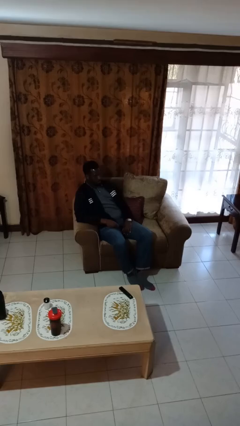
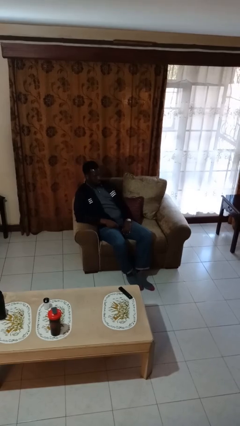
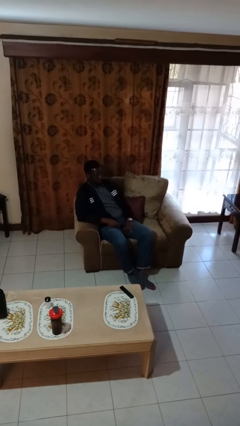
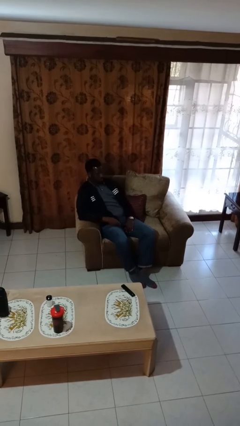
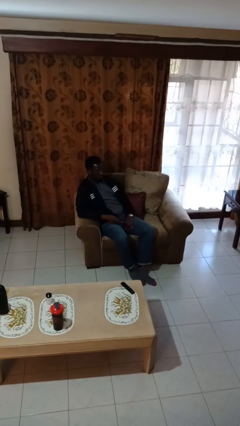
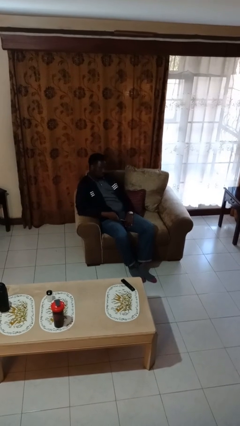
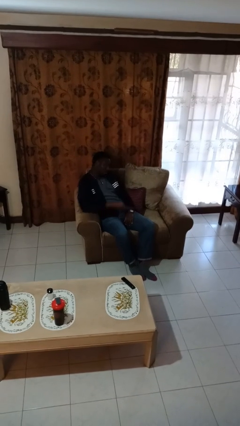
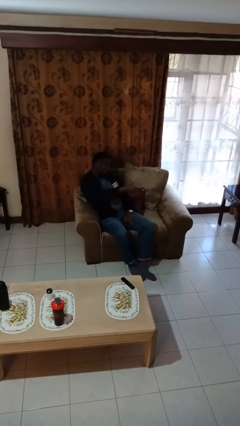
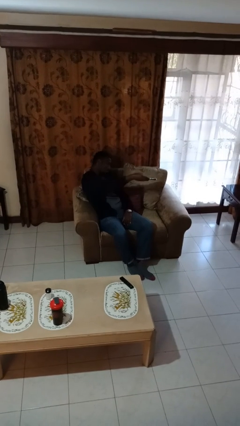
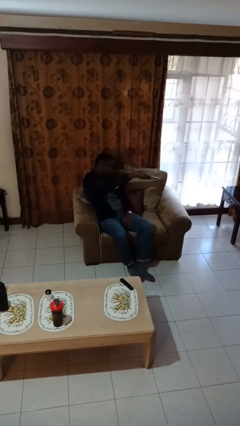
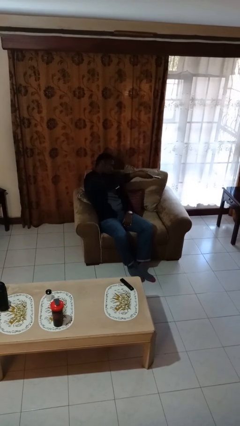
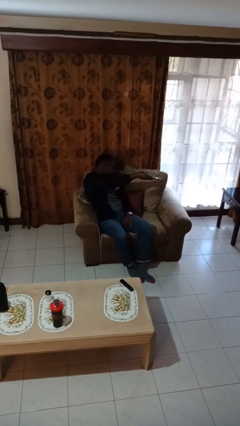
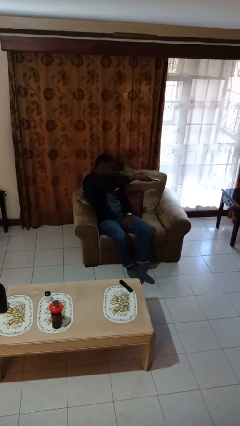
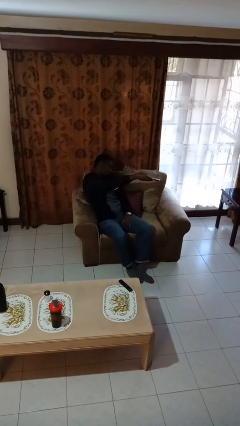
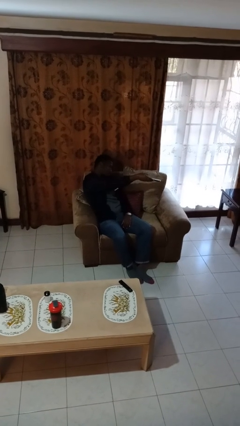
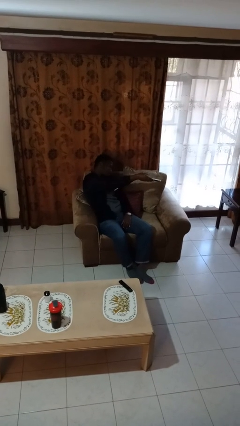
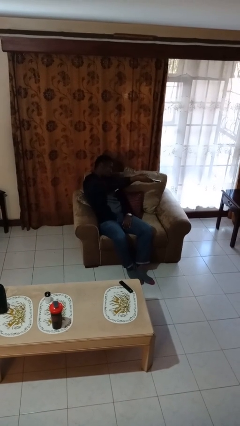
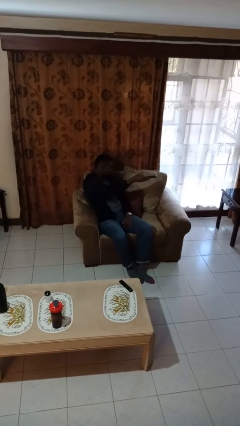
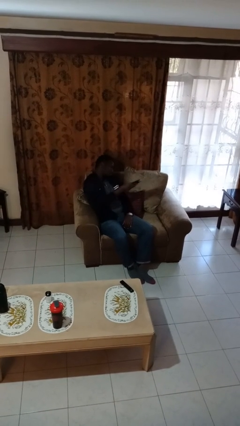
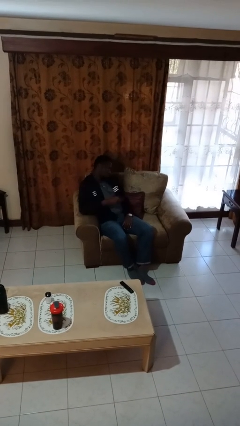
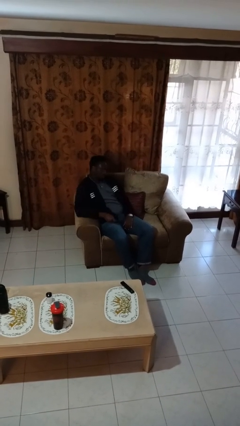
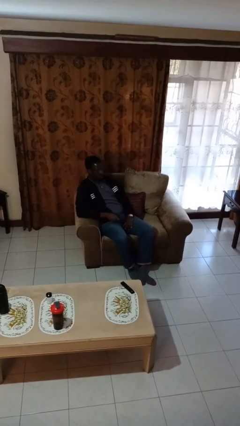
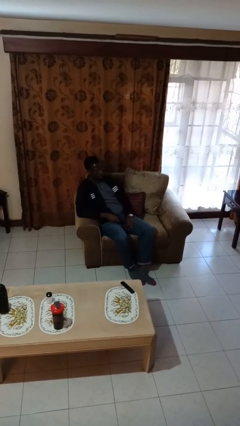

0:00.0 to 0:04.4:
person uses television remote

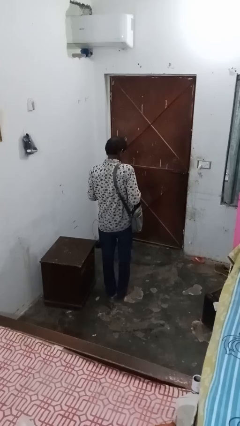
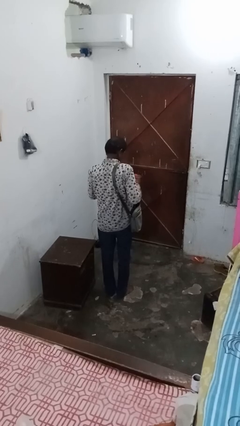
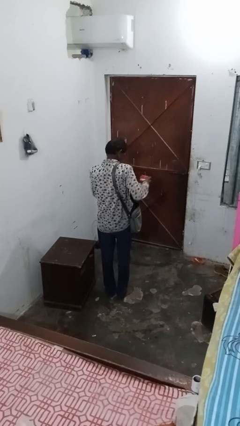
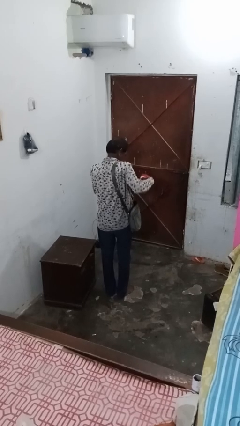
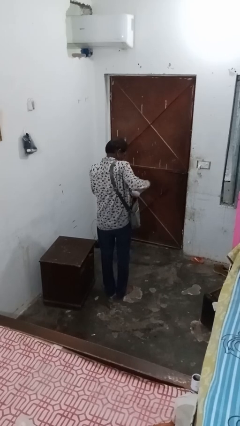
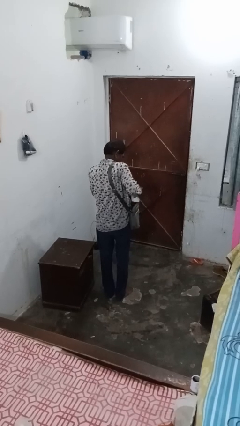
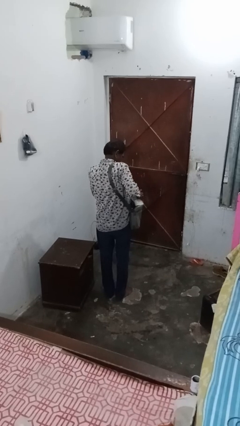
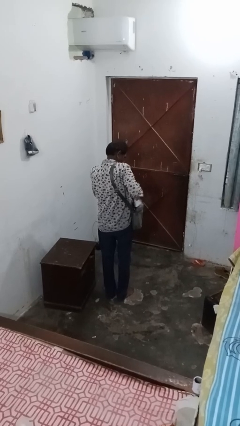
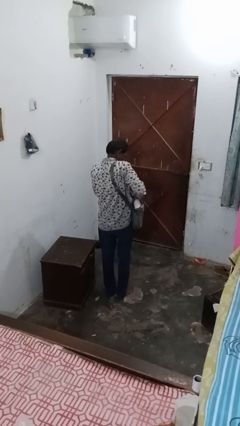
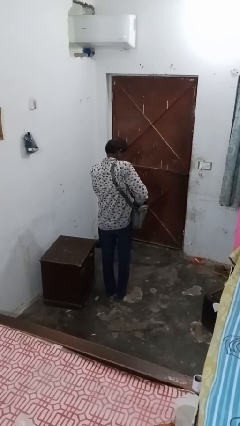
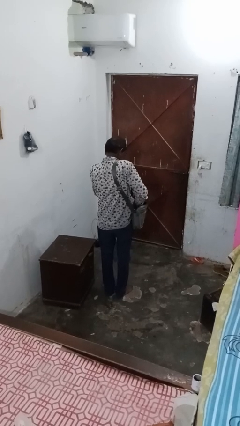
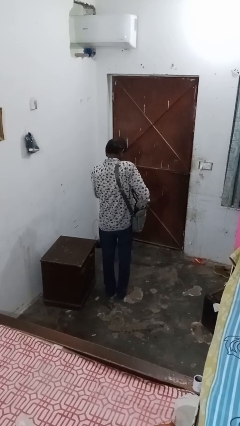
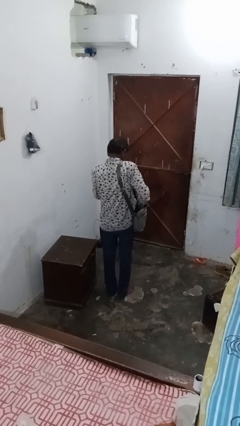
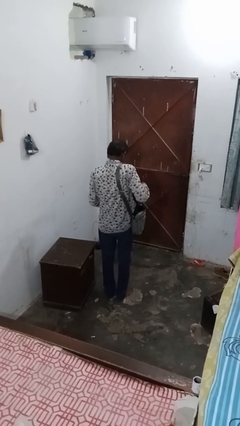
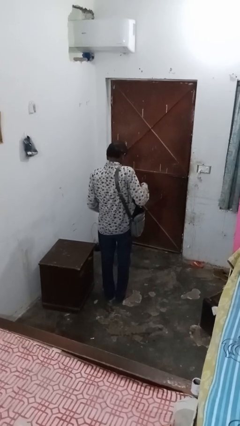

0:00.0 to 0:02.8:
person puts object into bag

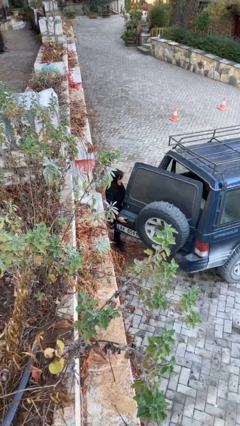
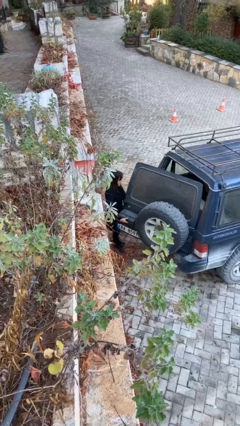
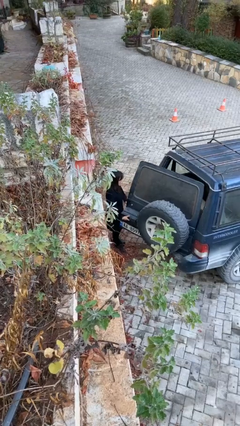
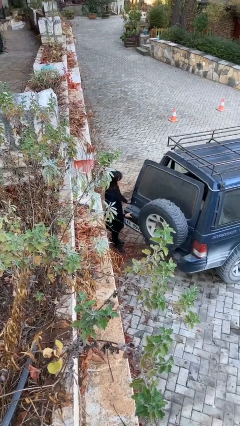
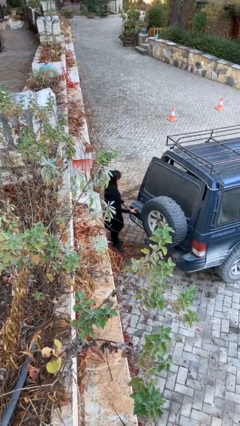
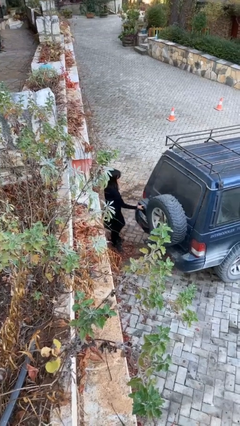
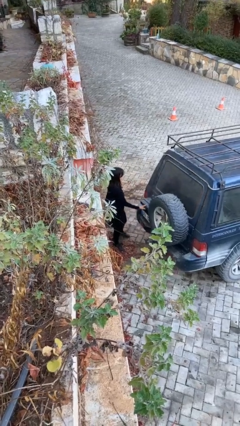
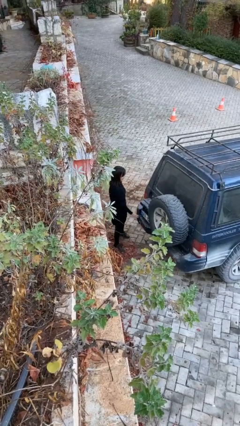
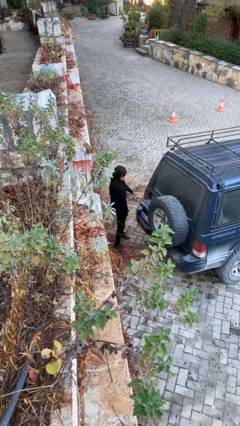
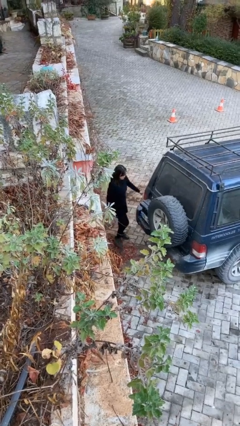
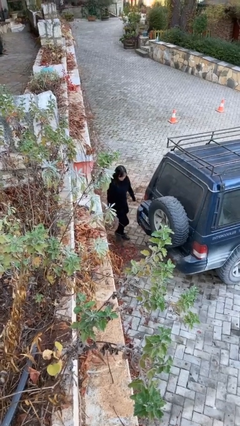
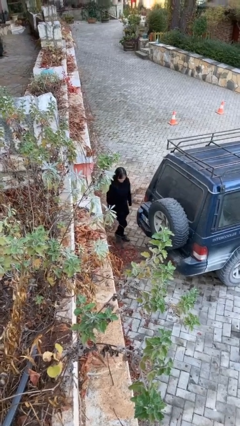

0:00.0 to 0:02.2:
person closes car trunk

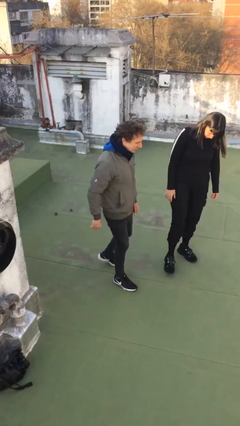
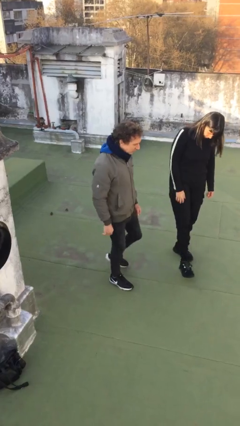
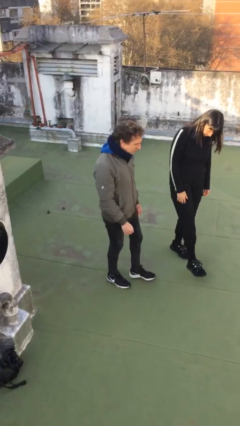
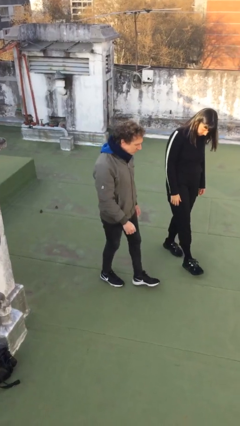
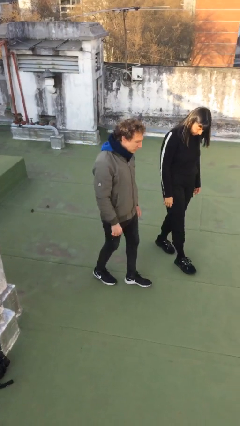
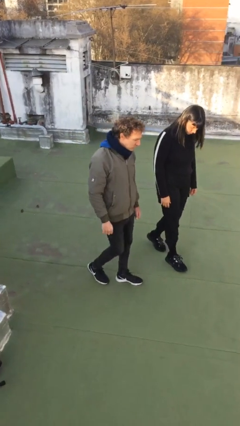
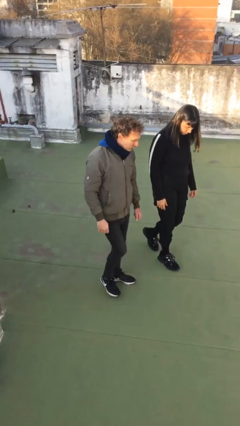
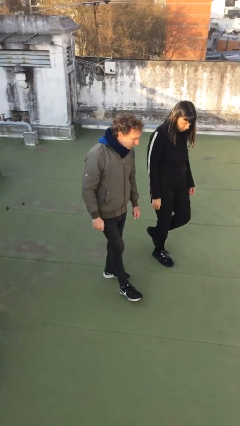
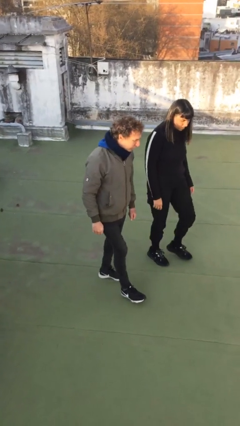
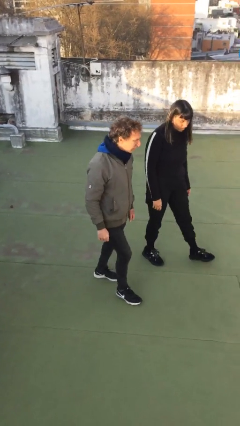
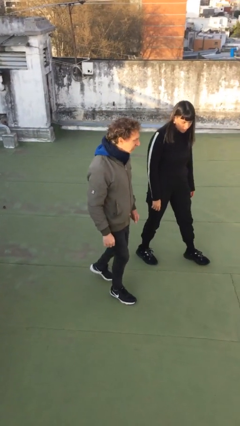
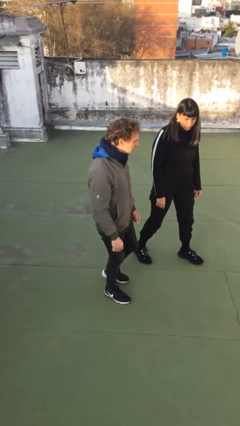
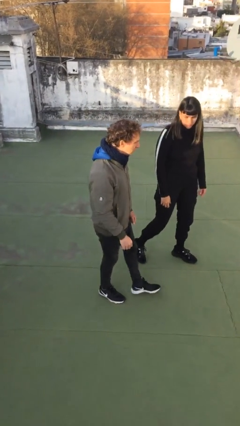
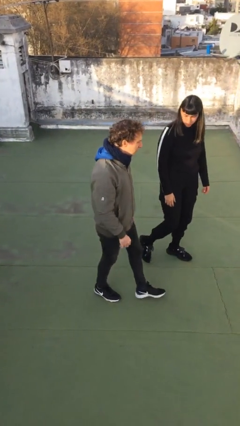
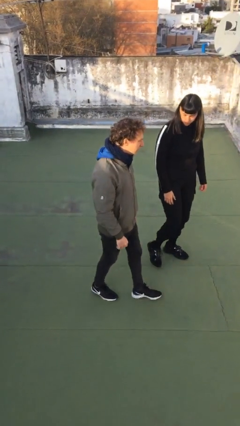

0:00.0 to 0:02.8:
person talks to person

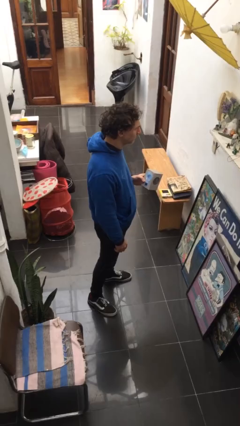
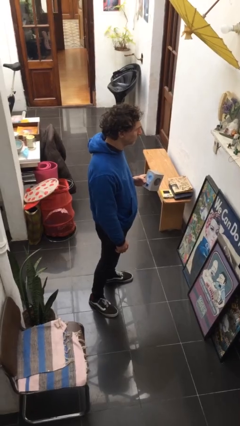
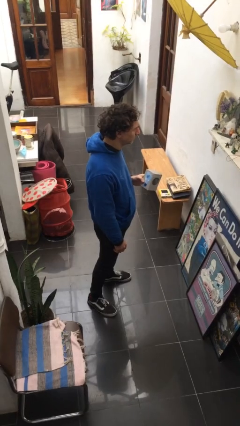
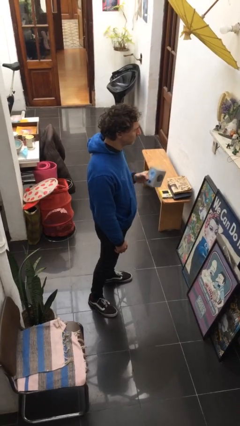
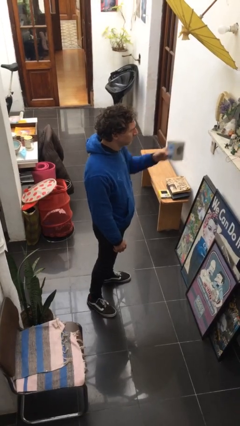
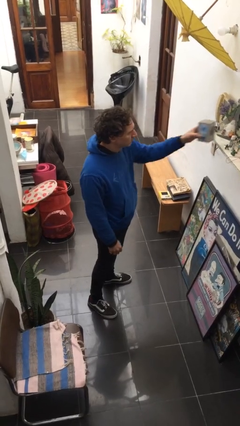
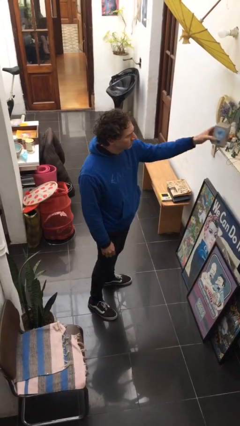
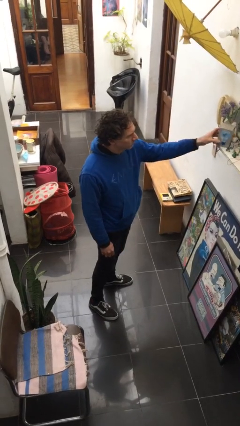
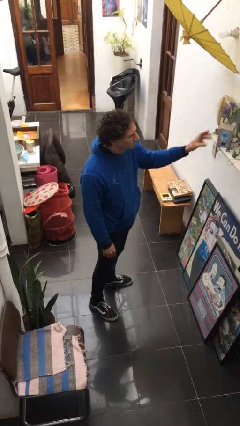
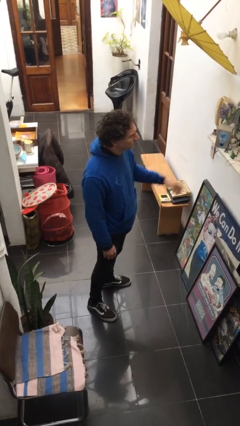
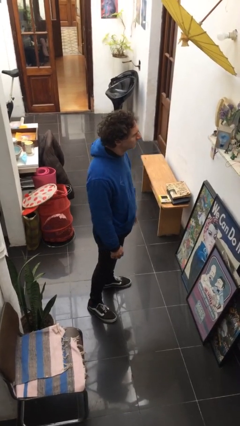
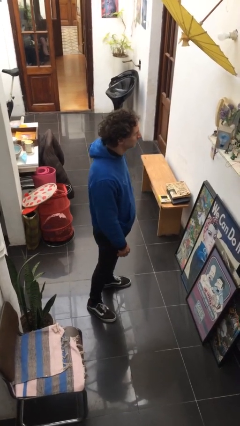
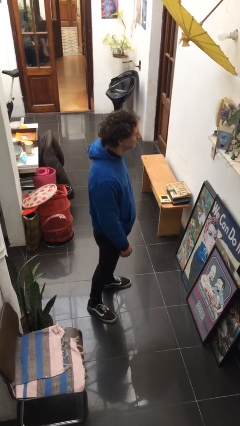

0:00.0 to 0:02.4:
person puts down object on countertop

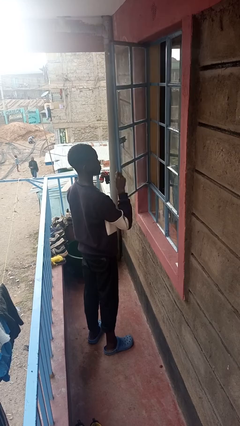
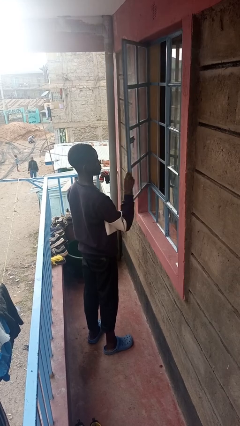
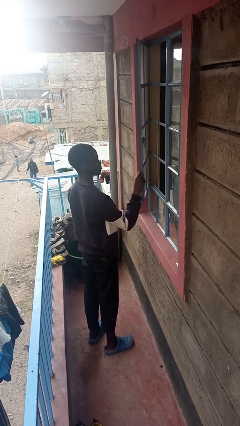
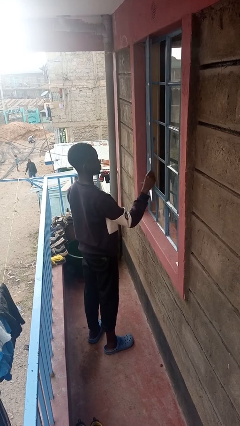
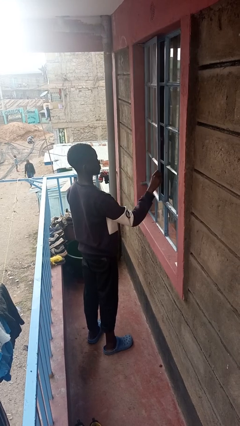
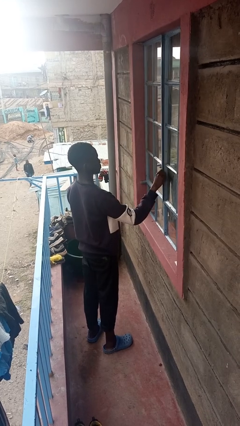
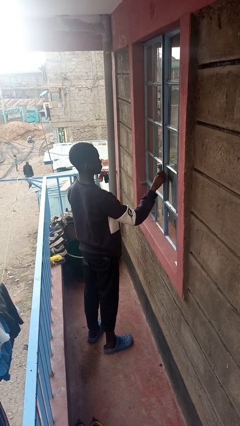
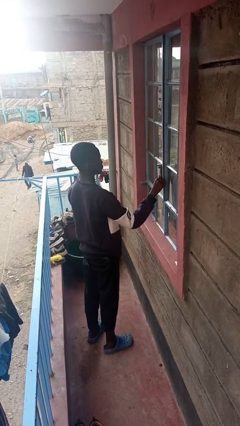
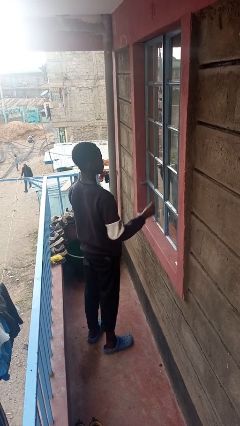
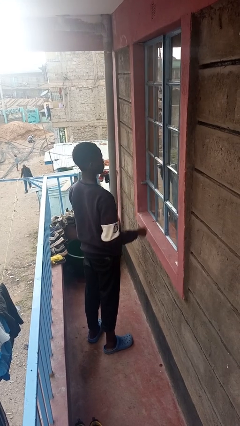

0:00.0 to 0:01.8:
person closes home window

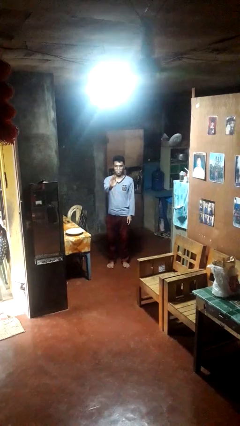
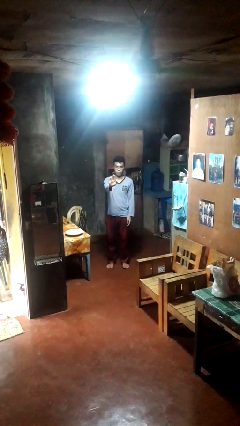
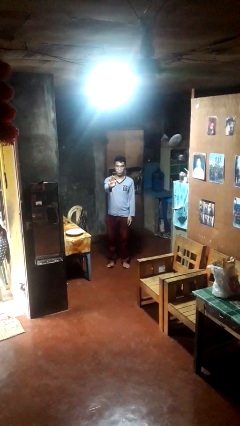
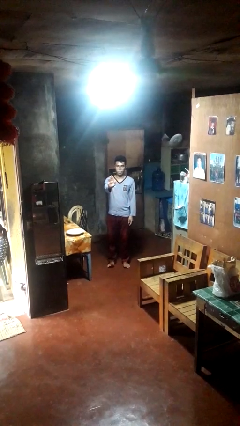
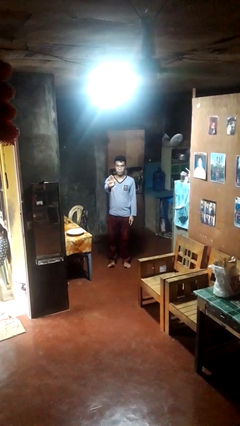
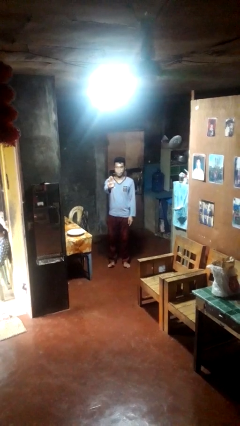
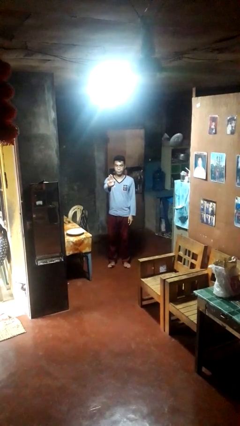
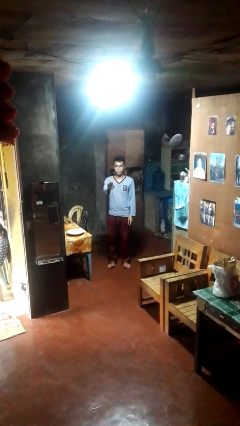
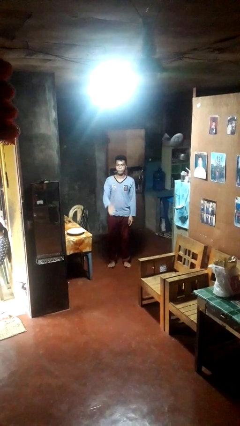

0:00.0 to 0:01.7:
person gestures stop
